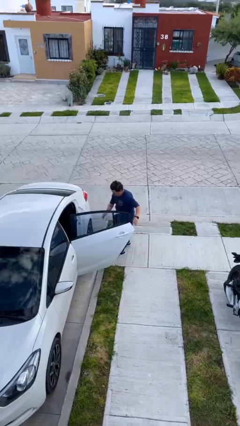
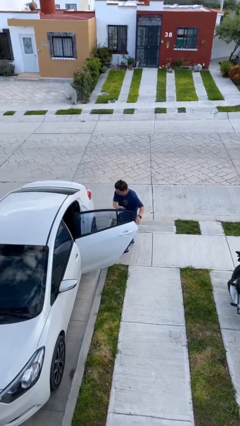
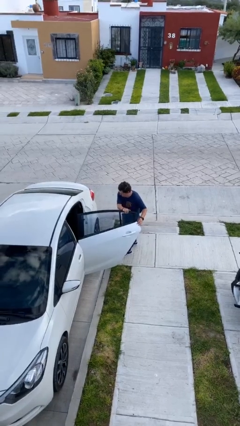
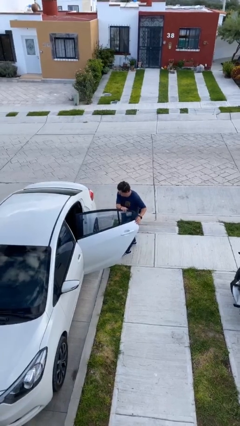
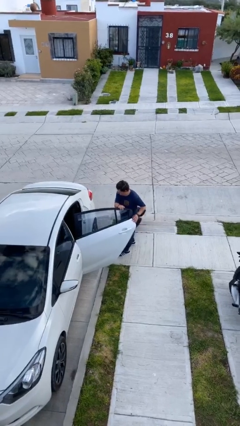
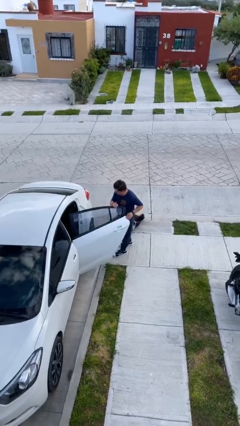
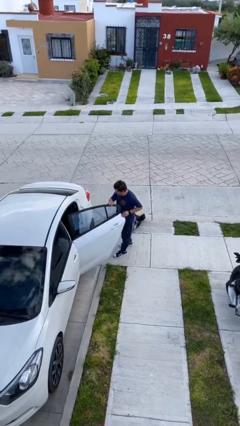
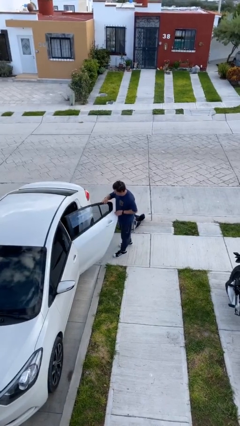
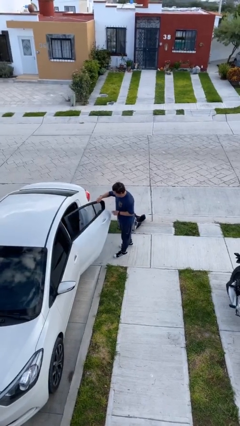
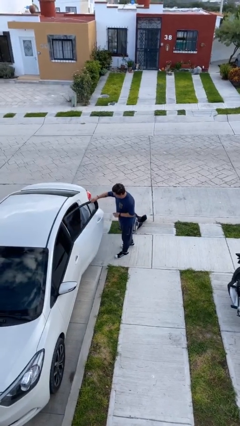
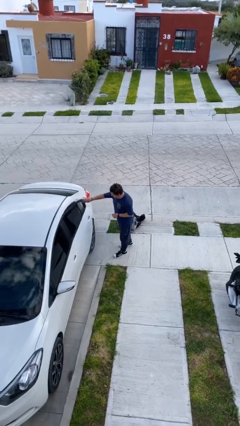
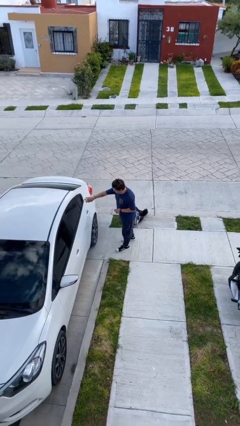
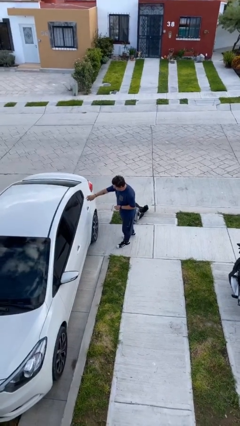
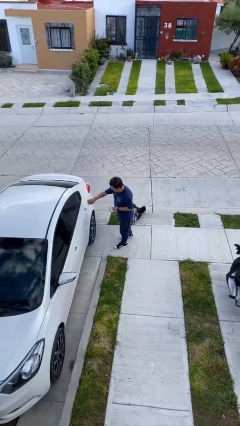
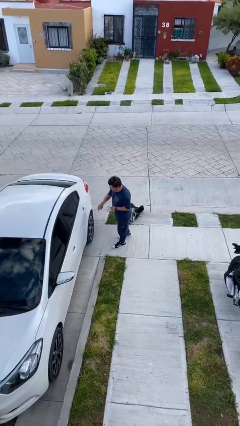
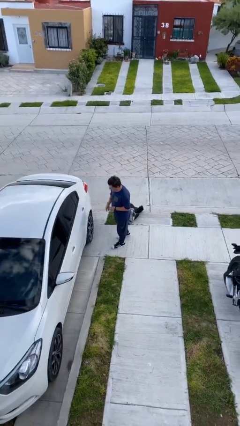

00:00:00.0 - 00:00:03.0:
person closes car door

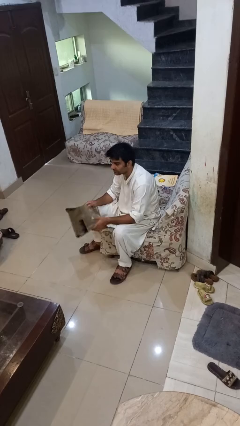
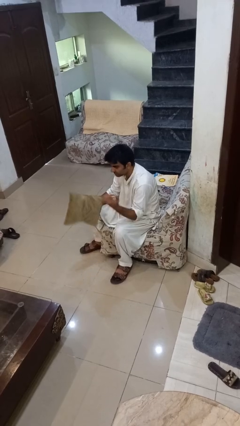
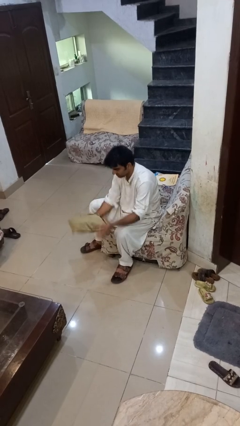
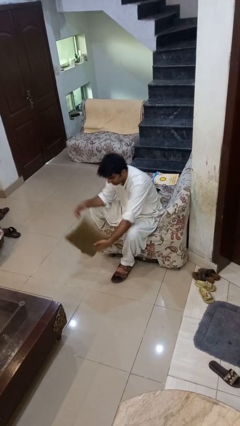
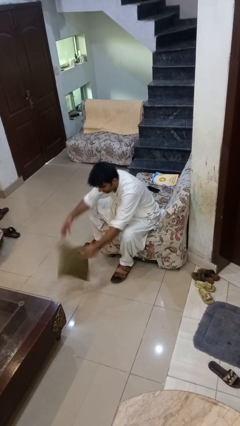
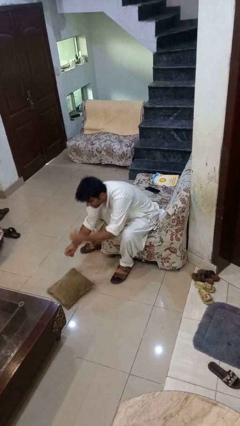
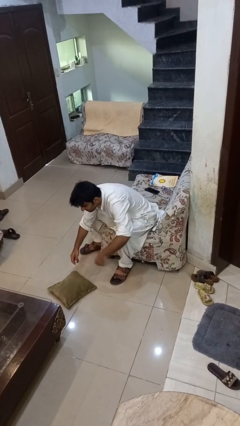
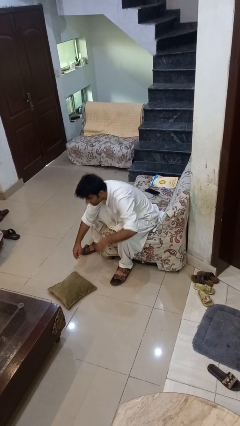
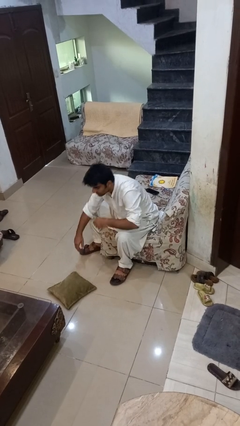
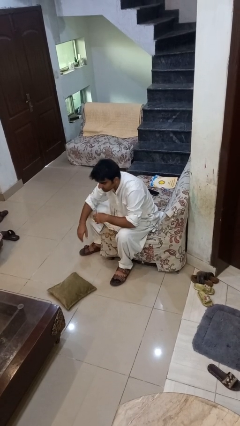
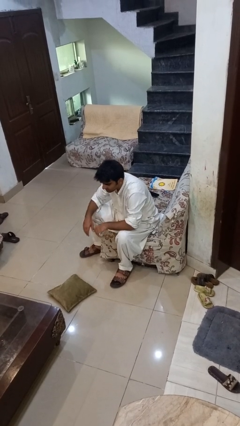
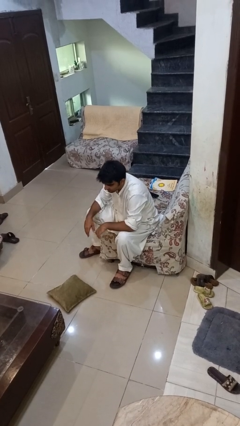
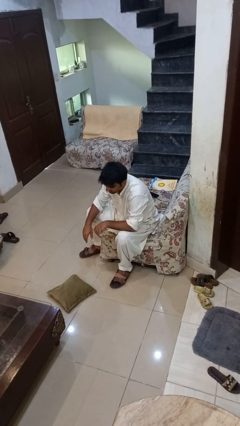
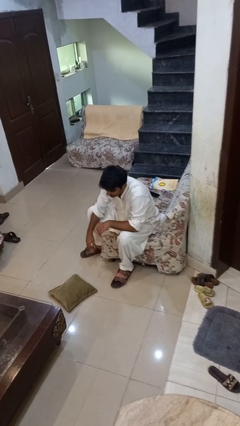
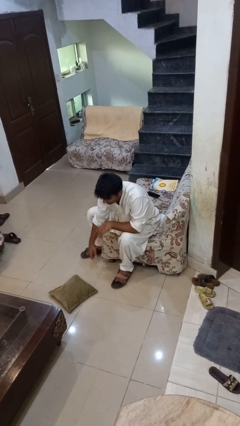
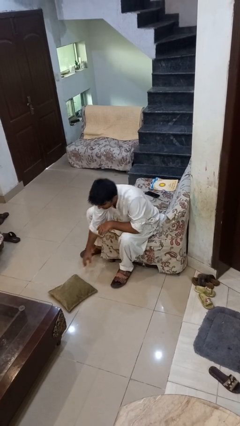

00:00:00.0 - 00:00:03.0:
person drops object

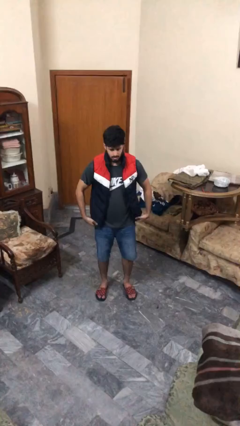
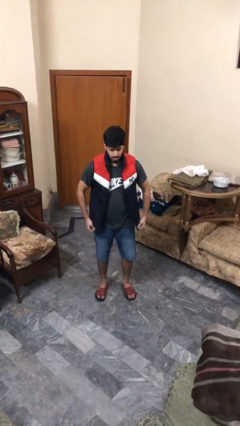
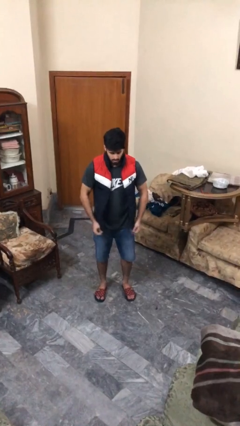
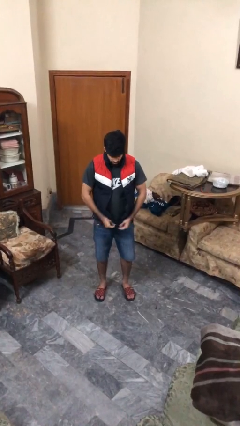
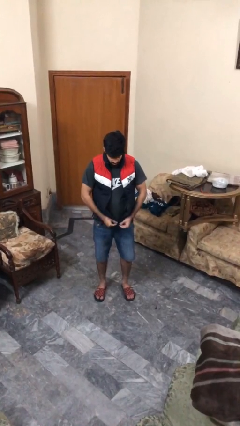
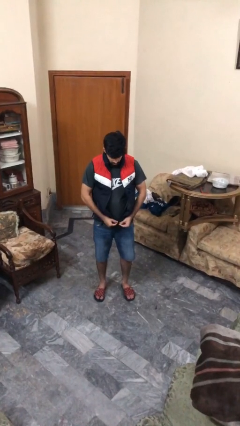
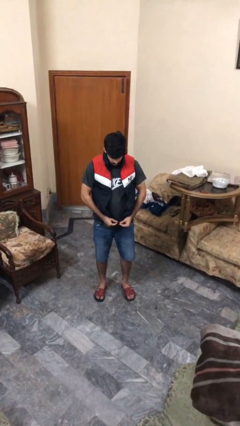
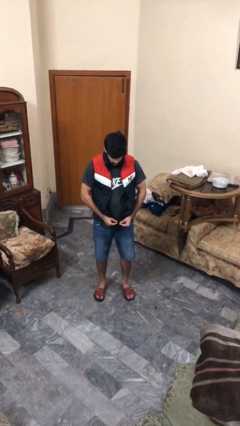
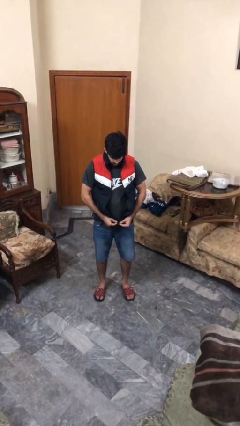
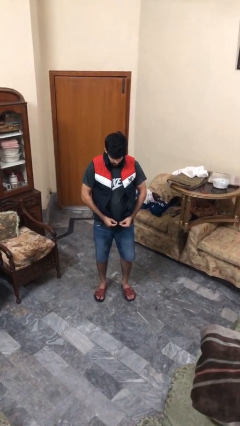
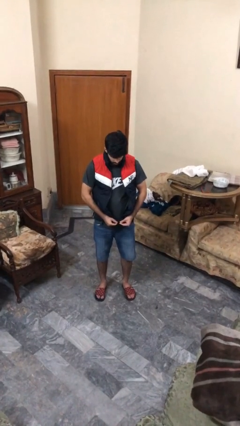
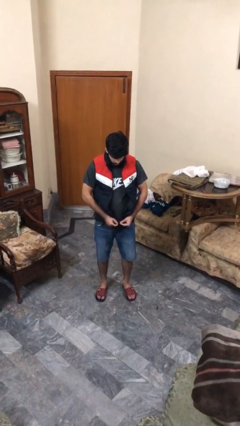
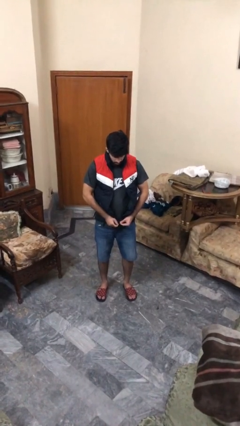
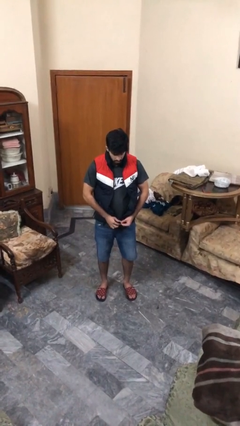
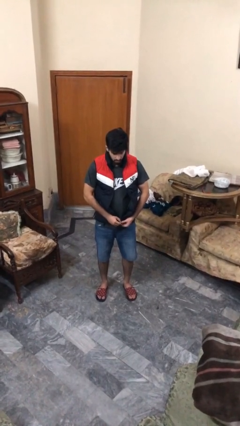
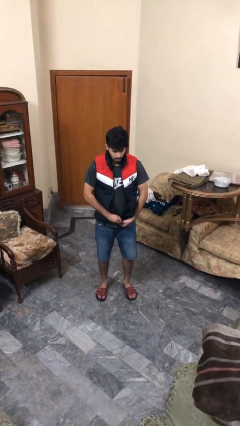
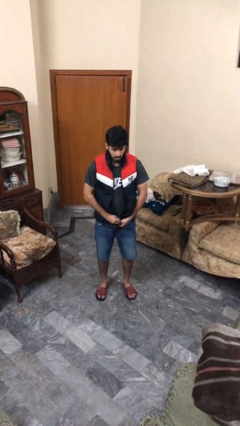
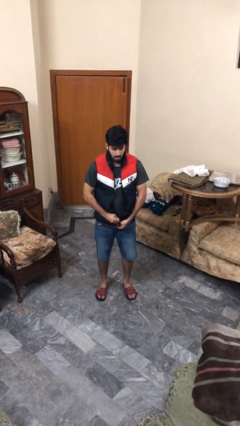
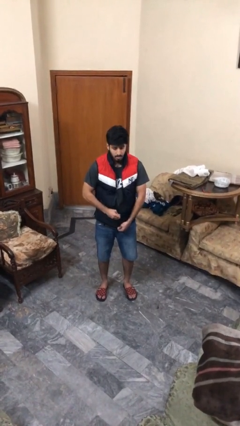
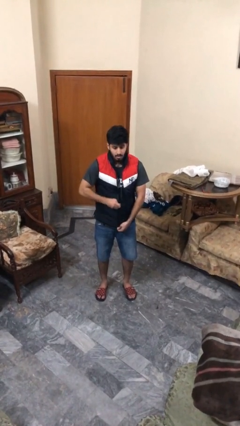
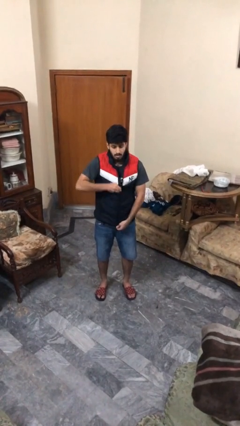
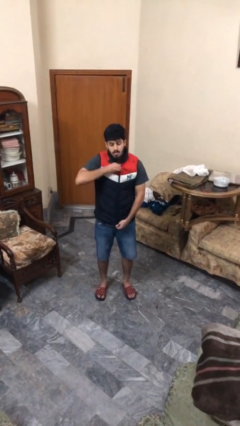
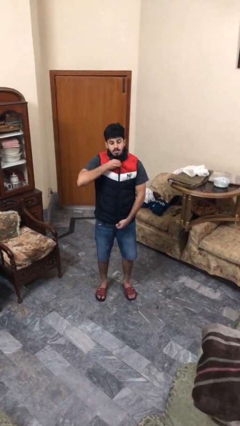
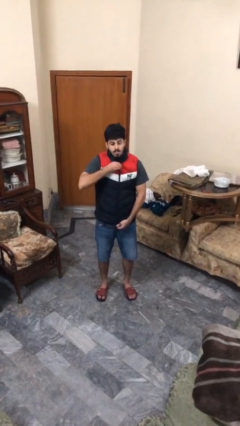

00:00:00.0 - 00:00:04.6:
person zips up jacket

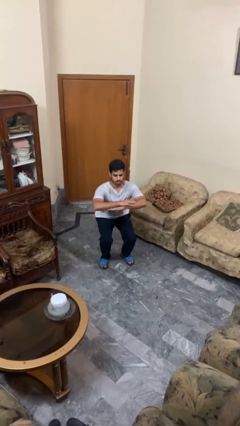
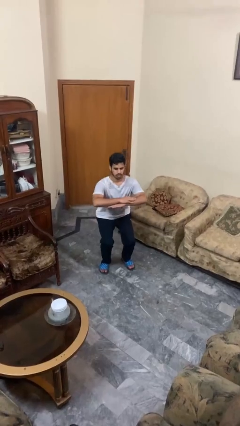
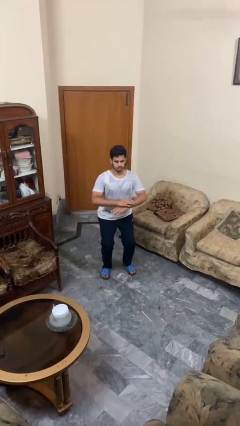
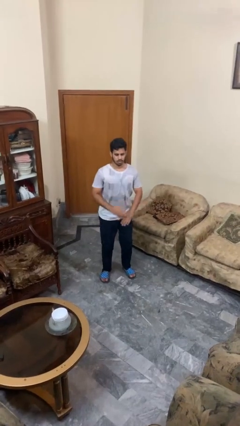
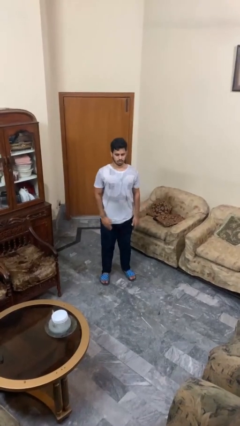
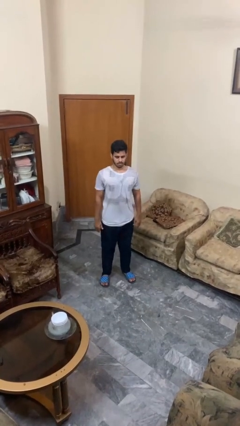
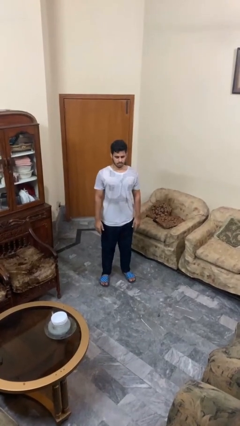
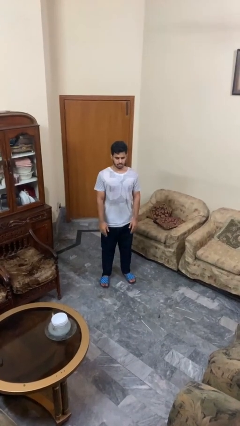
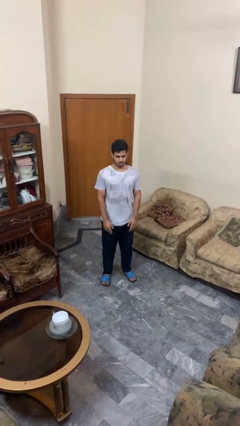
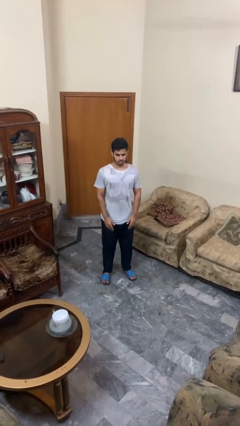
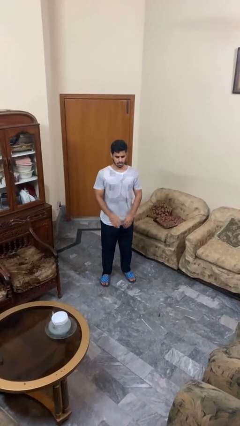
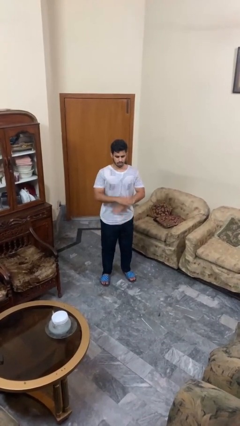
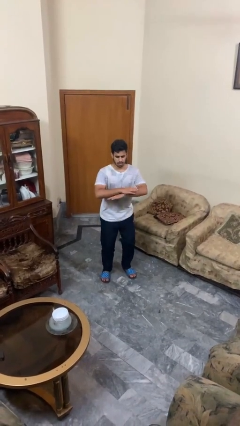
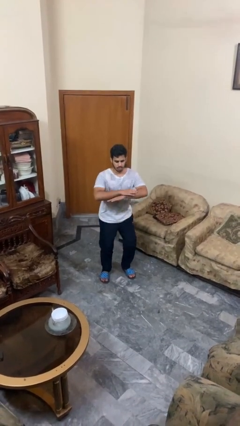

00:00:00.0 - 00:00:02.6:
person stands up

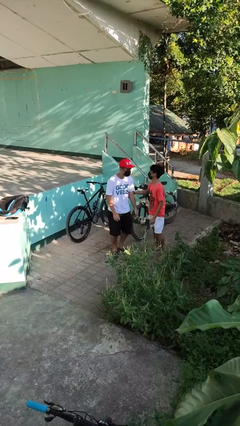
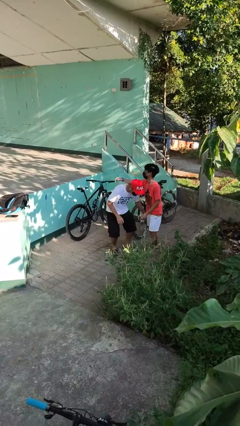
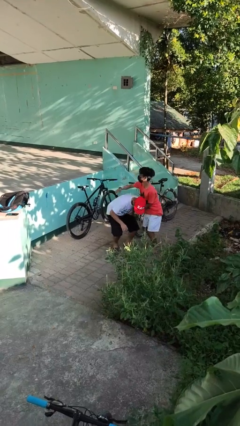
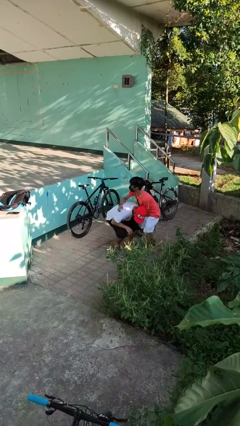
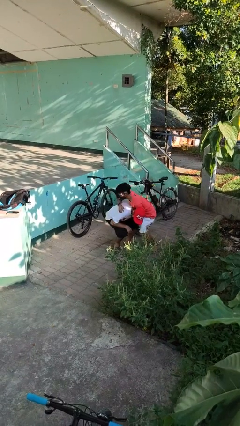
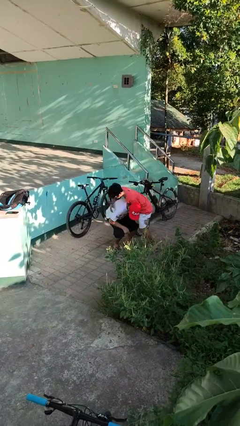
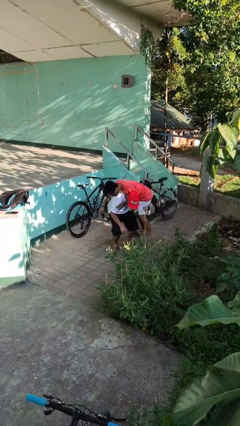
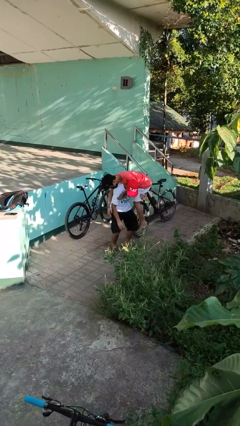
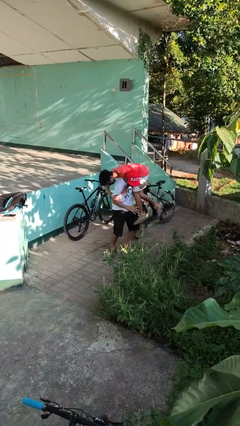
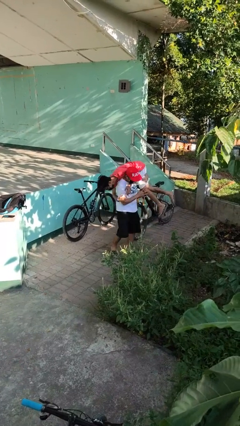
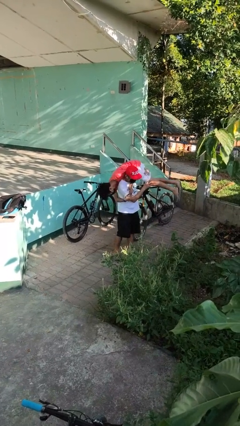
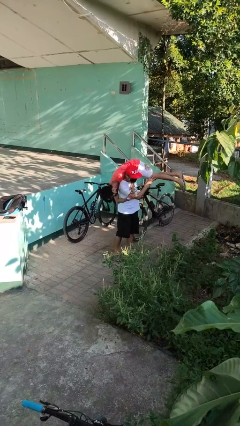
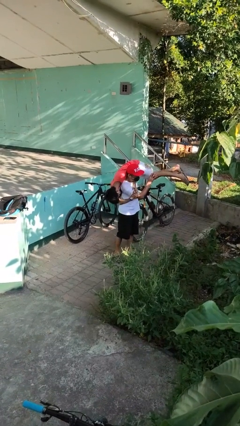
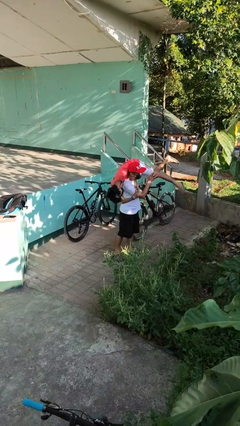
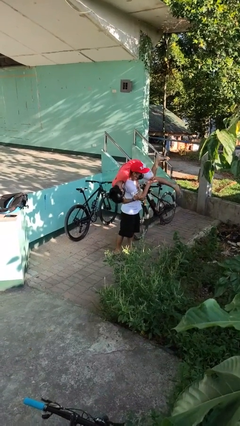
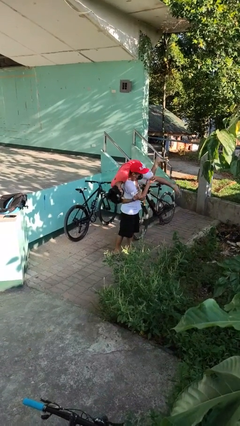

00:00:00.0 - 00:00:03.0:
person carries person over shoulder

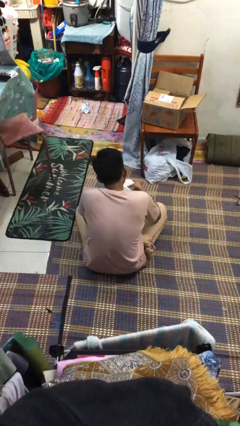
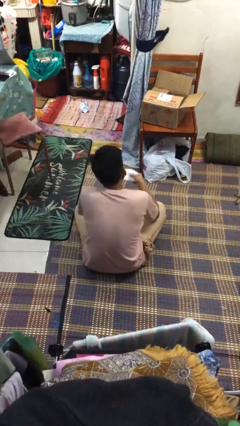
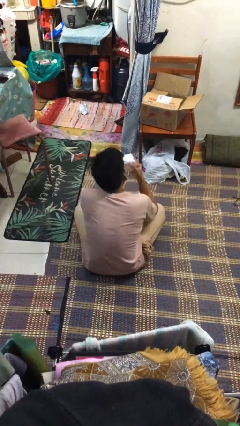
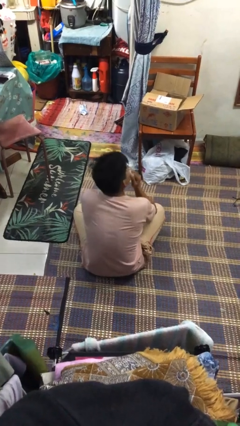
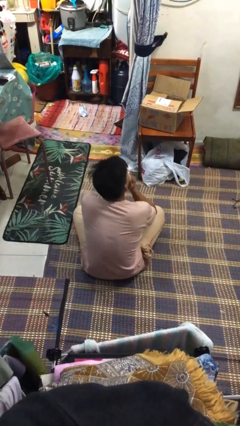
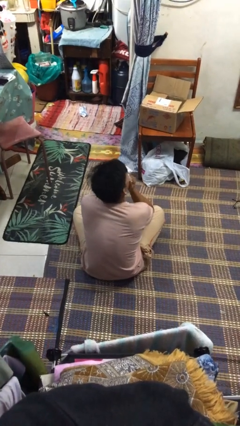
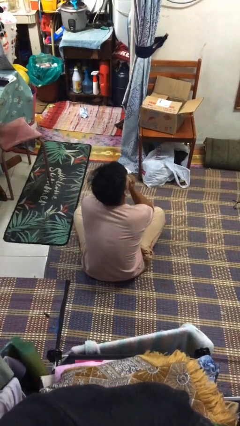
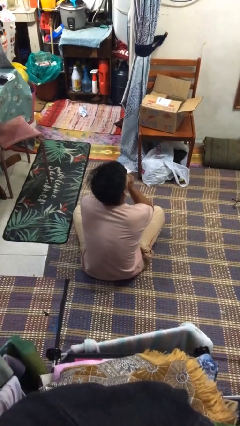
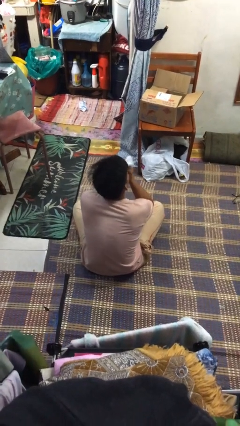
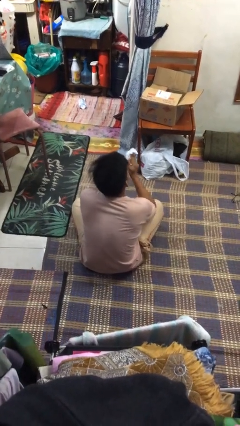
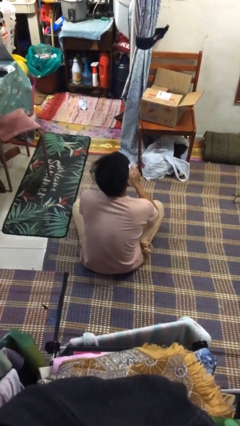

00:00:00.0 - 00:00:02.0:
person blows nose
